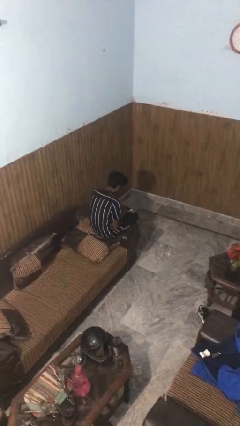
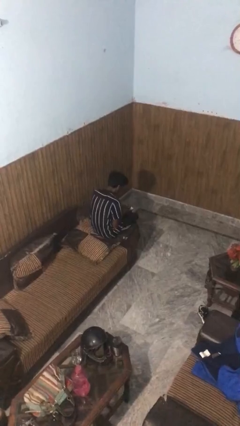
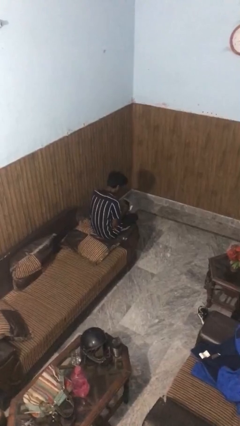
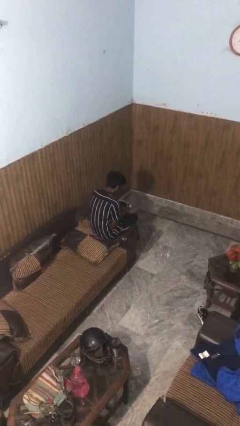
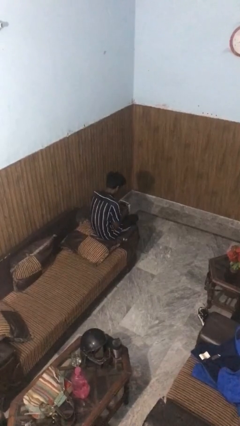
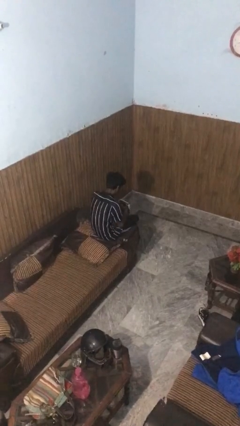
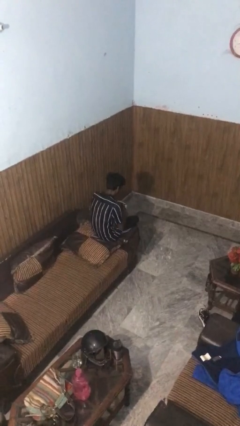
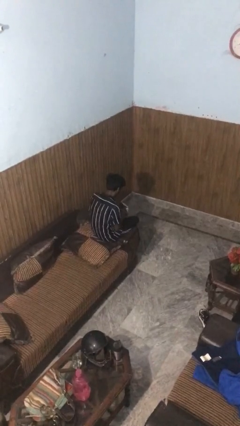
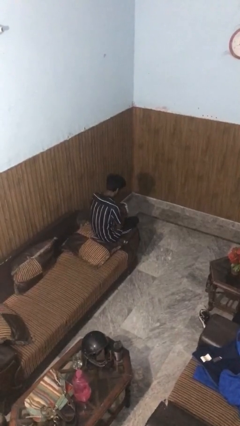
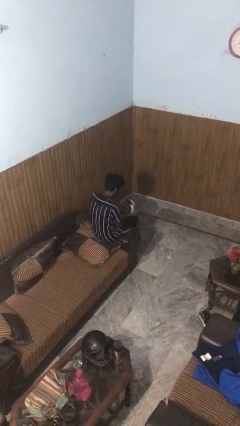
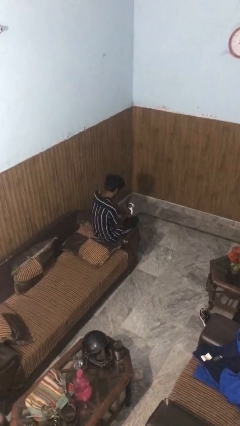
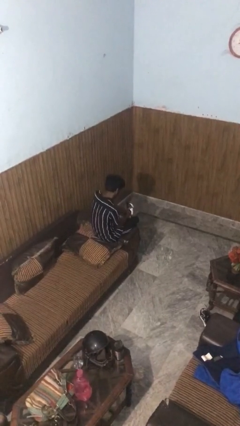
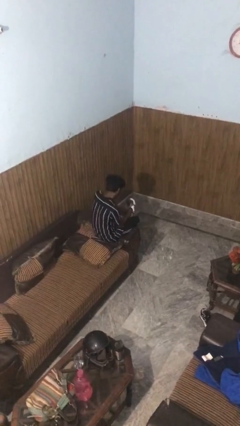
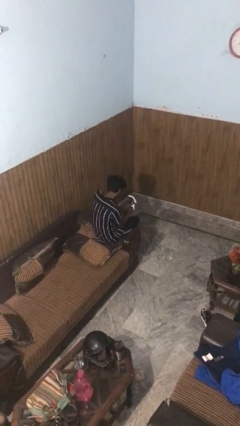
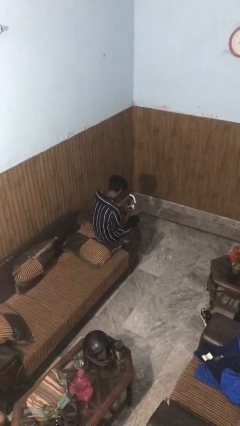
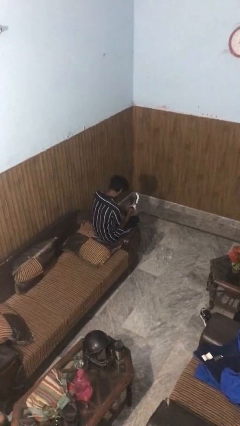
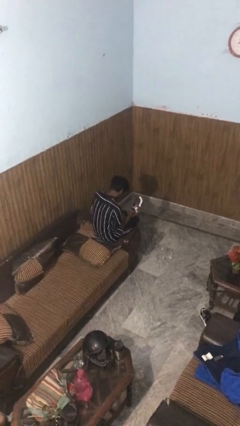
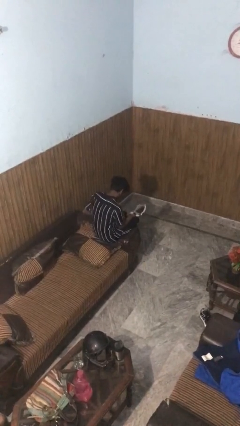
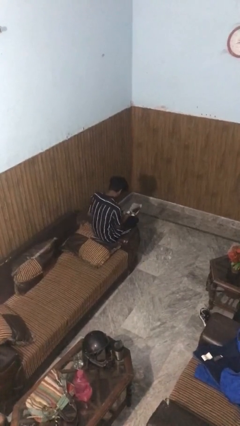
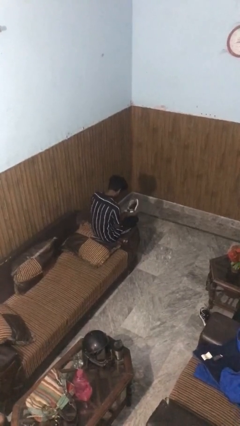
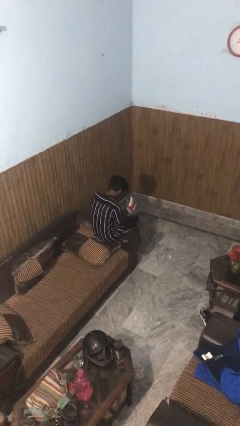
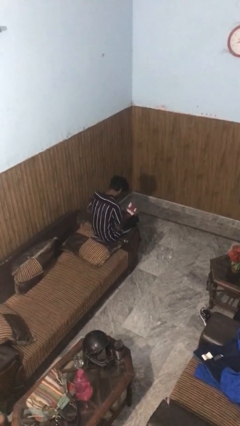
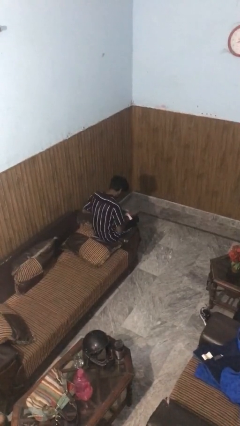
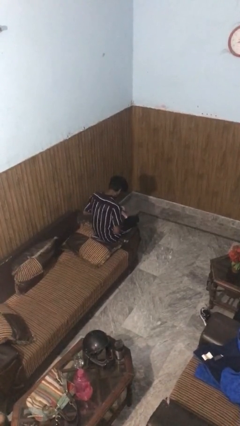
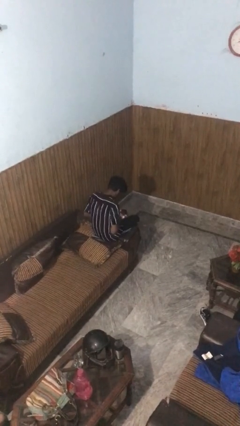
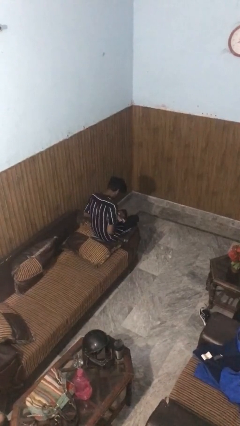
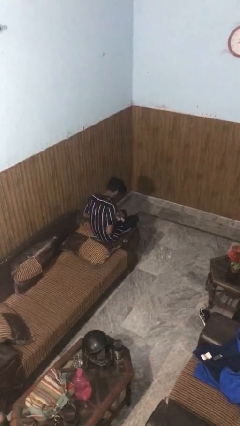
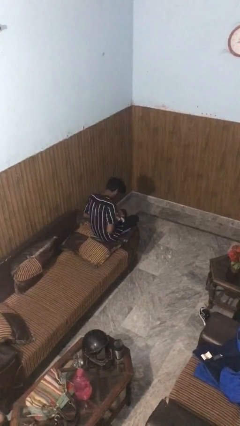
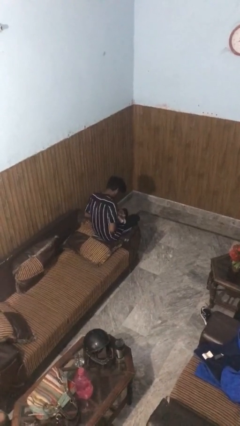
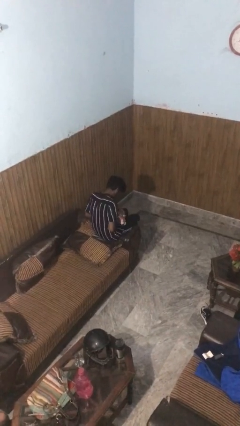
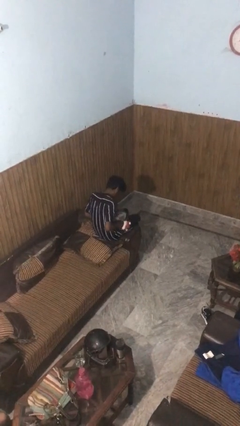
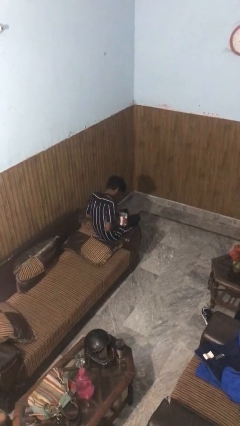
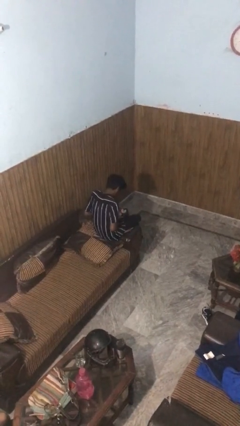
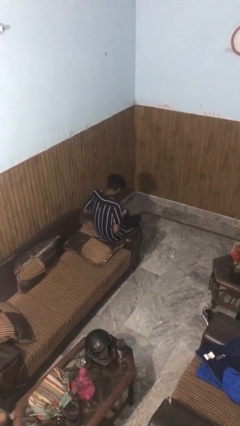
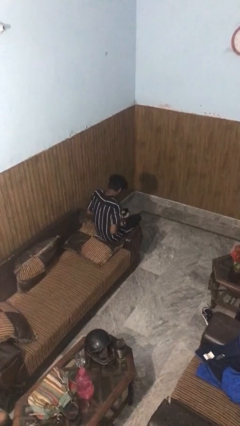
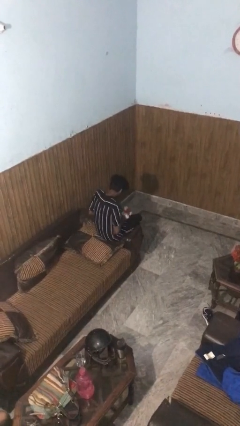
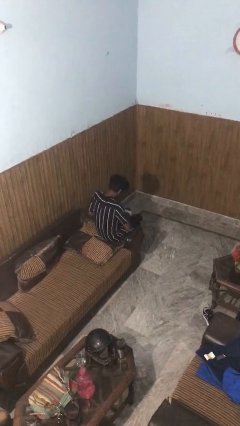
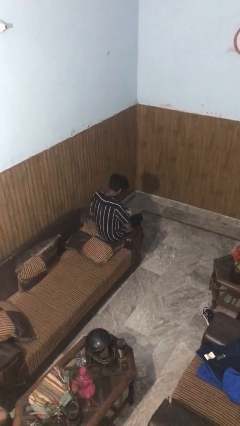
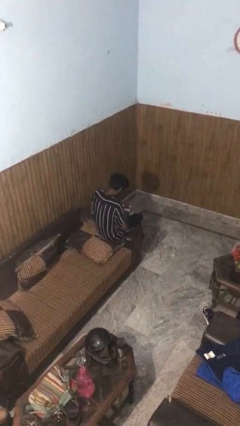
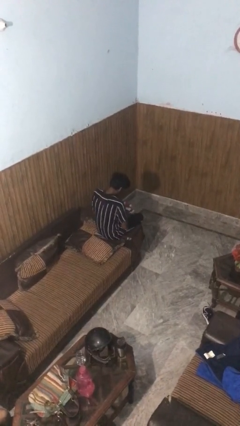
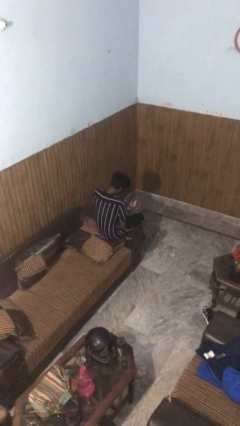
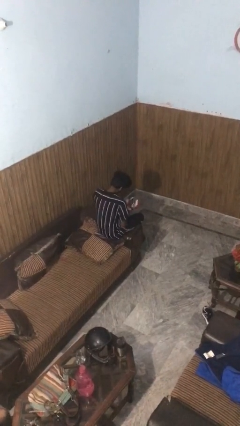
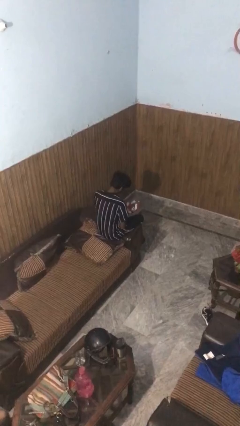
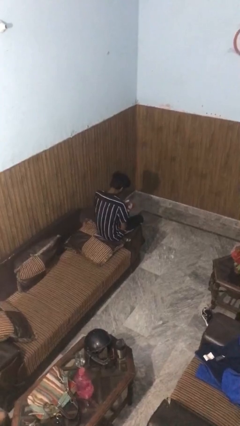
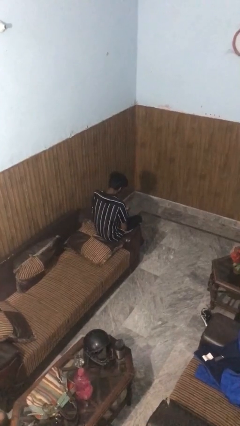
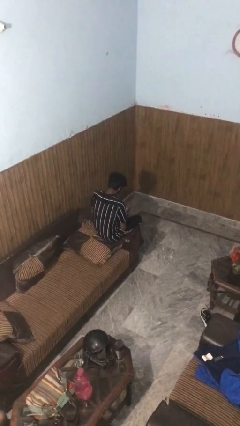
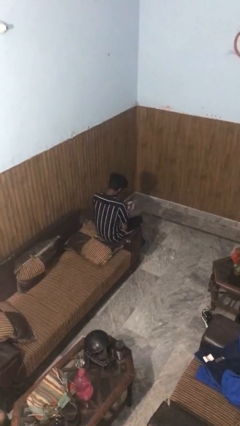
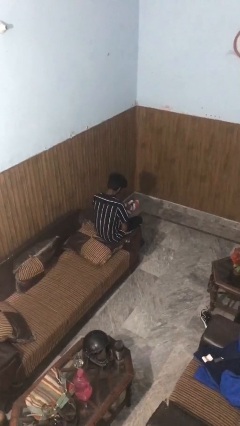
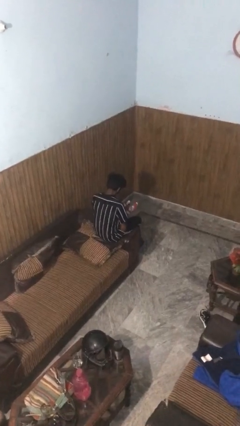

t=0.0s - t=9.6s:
person puts on gloves

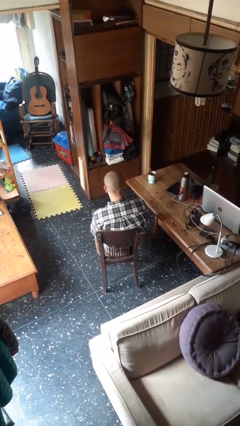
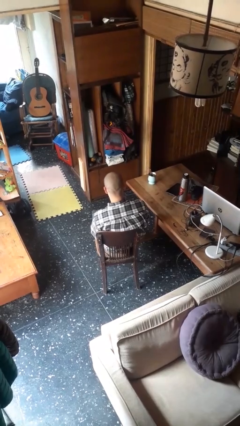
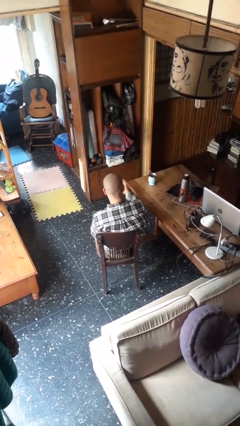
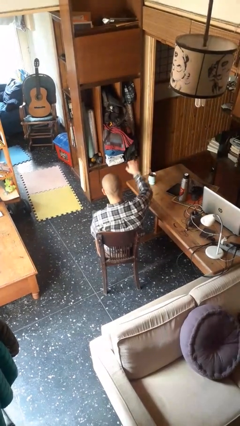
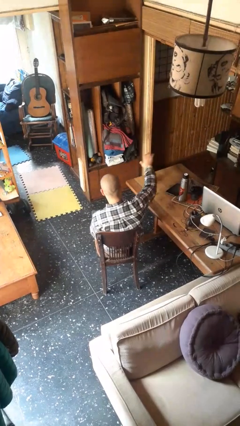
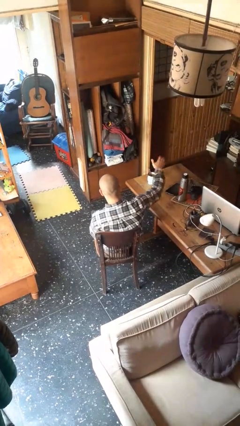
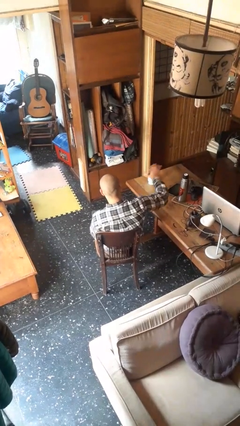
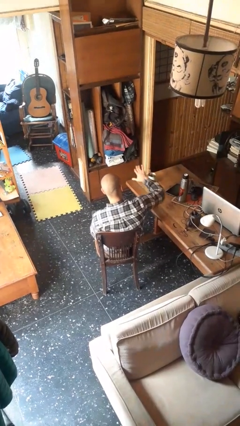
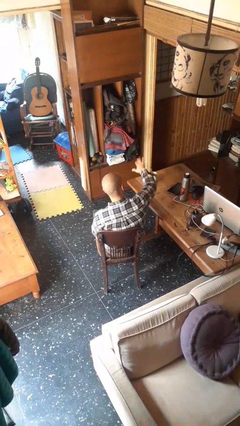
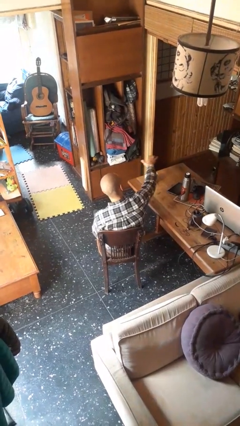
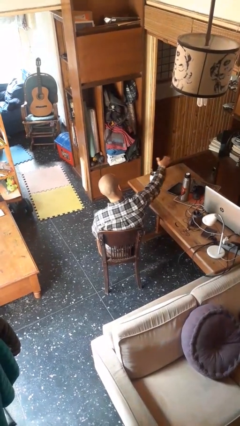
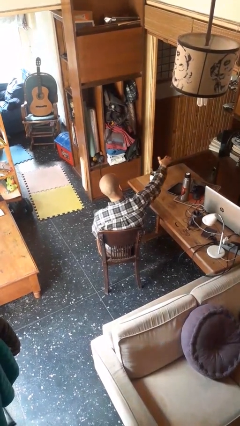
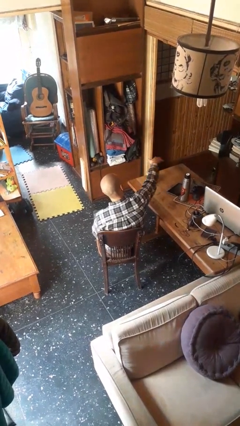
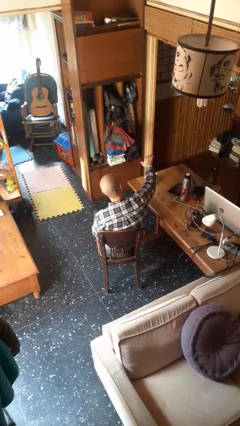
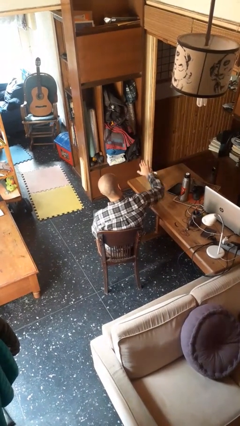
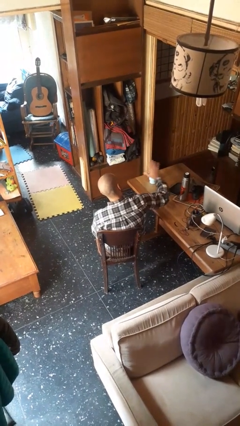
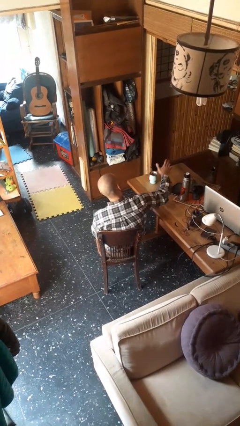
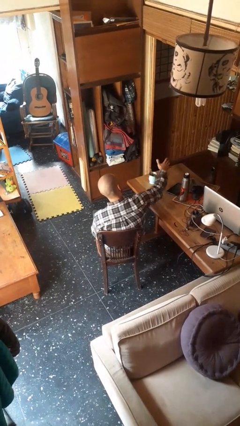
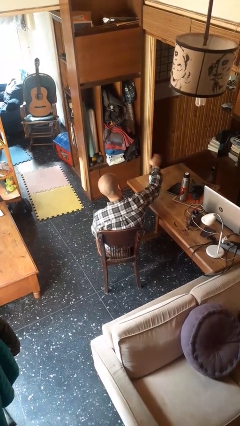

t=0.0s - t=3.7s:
person waves hand over object

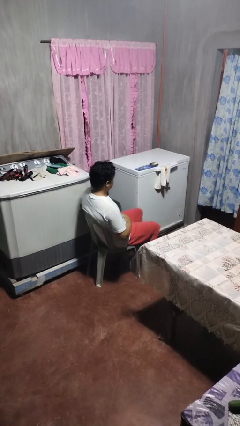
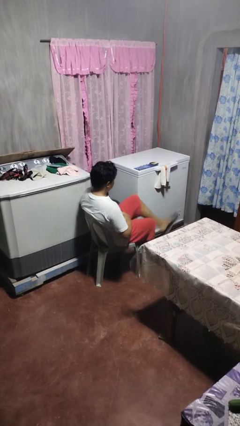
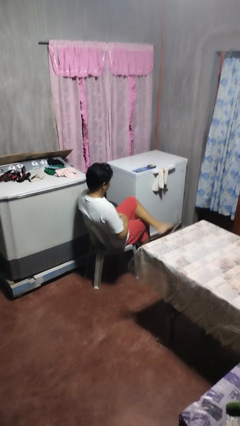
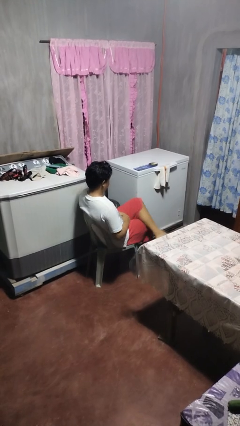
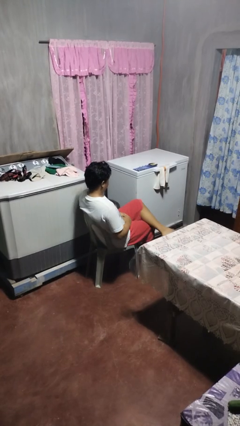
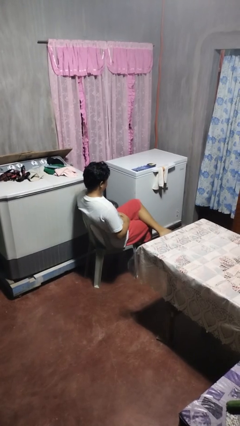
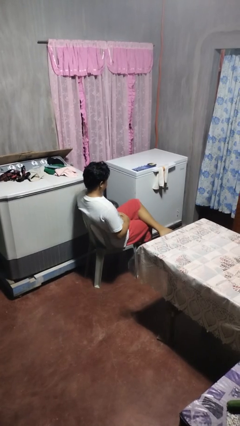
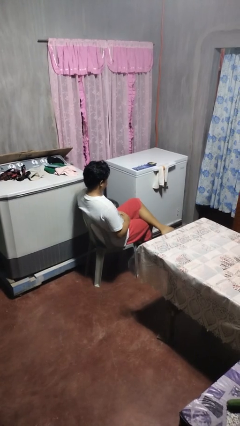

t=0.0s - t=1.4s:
person crosses legs

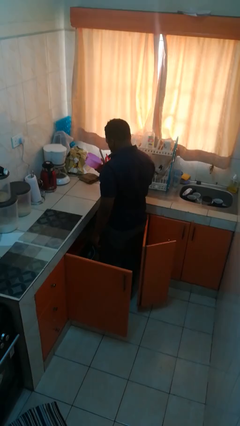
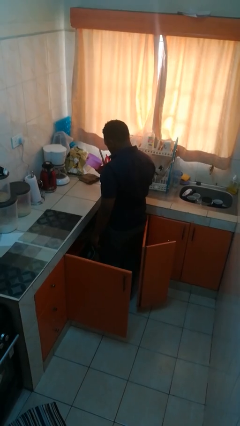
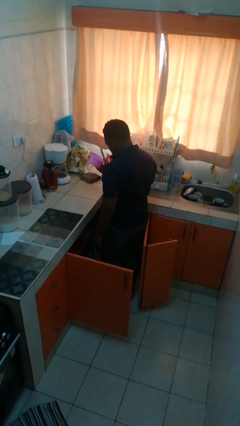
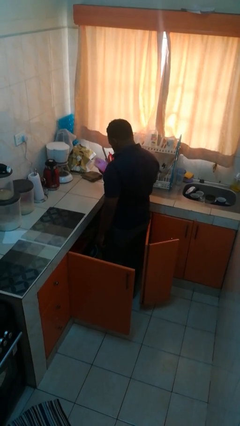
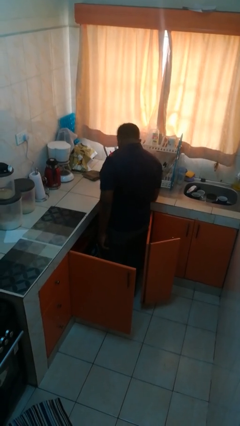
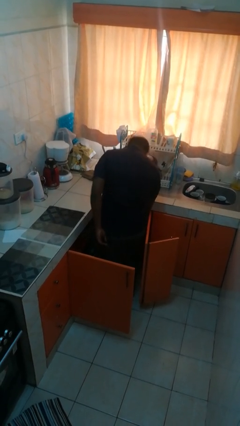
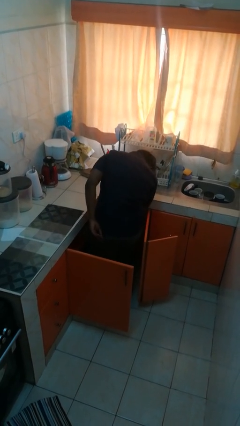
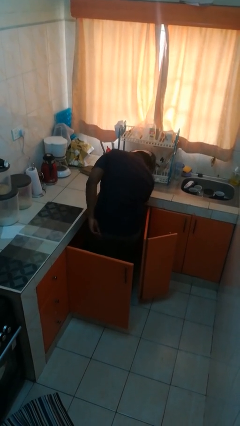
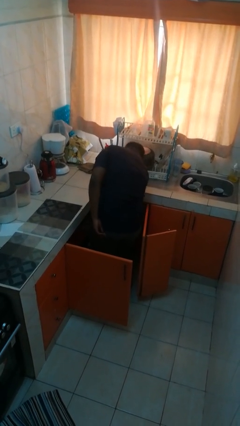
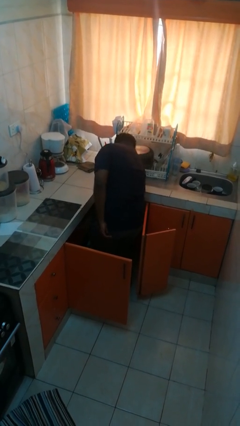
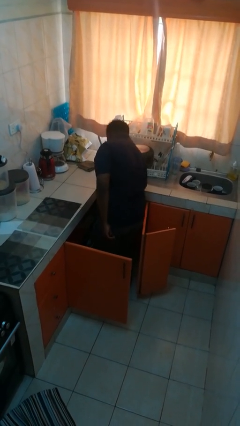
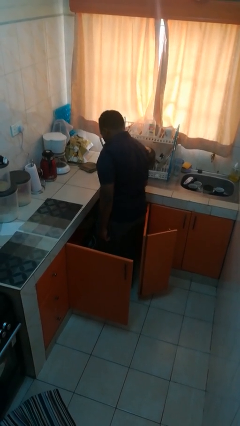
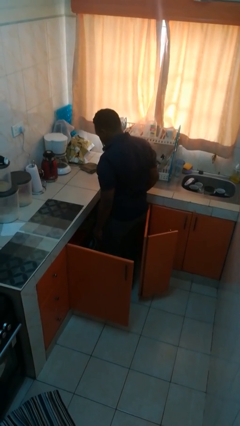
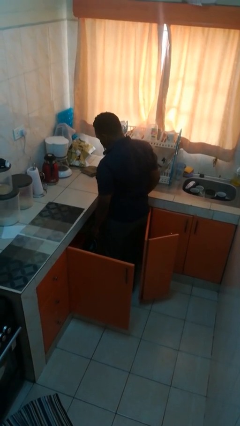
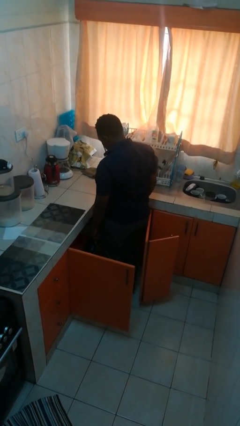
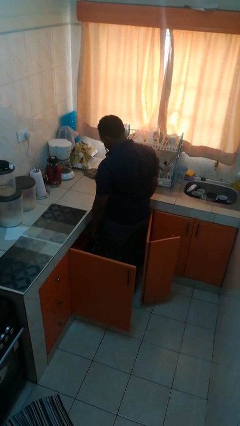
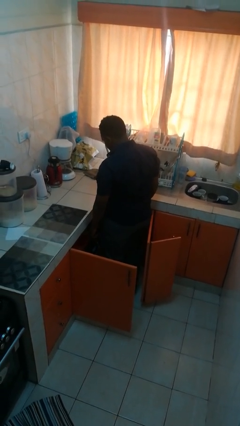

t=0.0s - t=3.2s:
person puts object in cabinet
